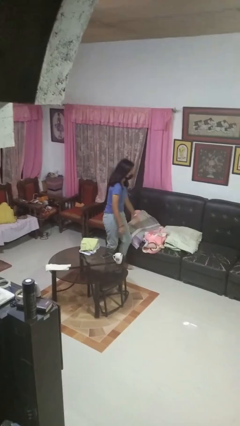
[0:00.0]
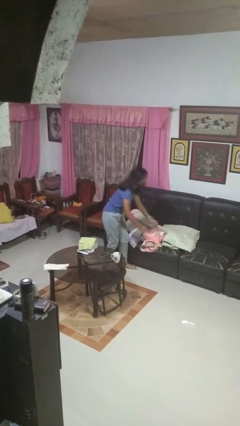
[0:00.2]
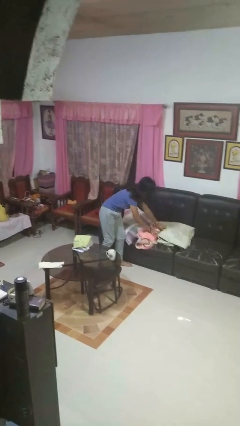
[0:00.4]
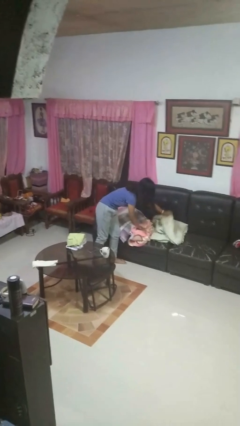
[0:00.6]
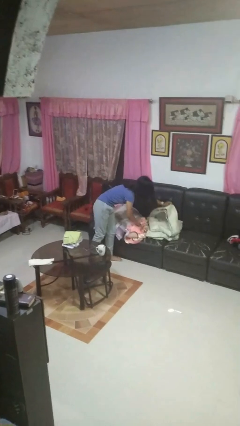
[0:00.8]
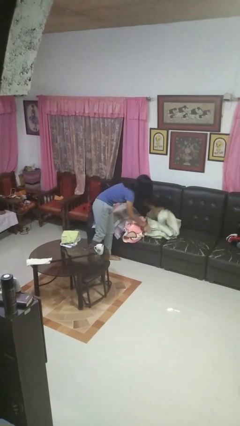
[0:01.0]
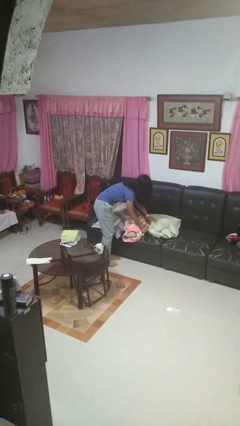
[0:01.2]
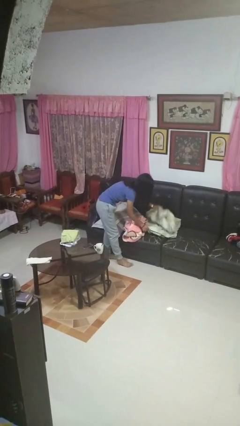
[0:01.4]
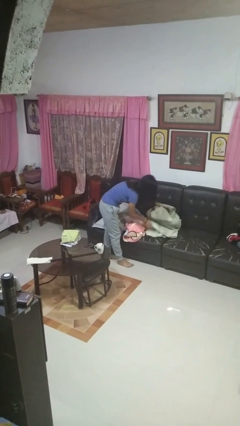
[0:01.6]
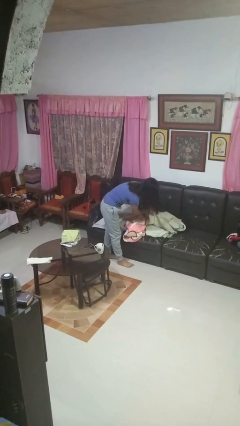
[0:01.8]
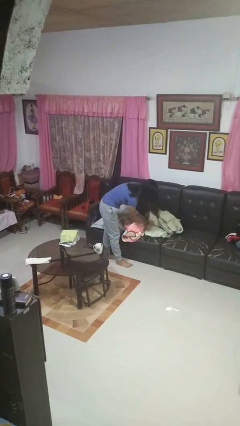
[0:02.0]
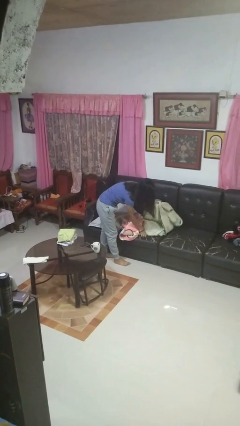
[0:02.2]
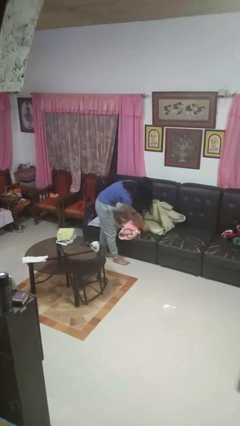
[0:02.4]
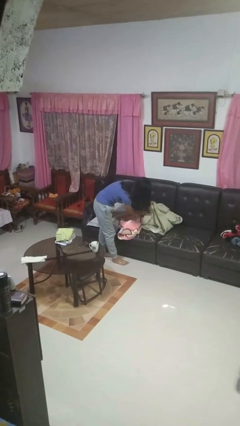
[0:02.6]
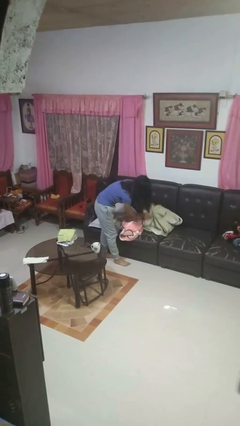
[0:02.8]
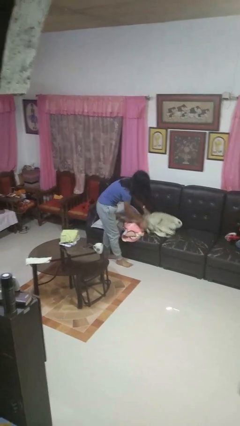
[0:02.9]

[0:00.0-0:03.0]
person searches in couch

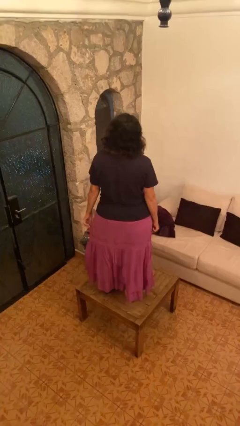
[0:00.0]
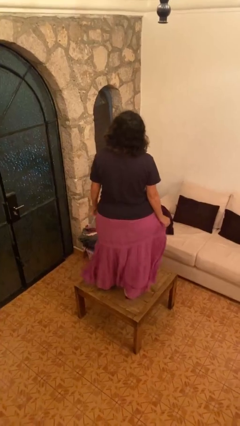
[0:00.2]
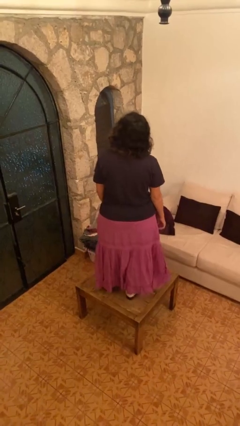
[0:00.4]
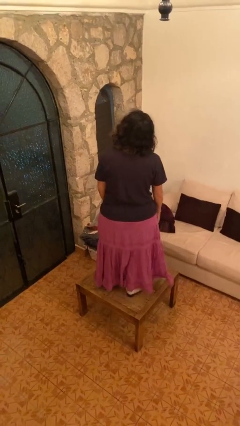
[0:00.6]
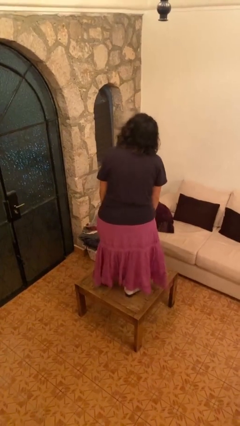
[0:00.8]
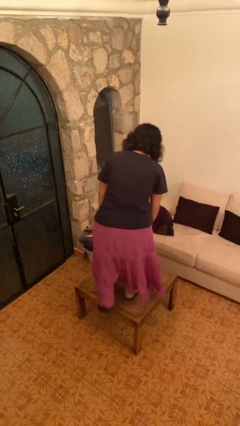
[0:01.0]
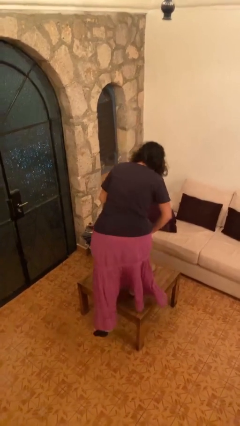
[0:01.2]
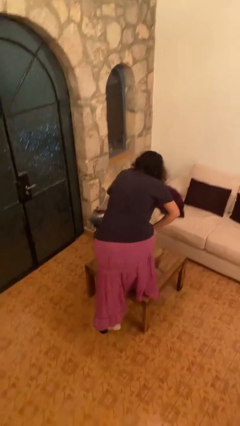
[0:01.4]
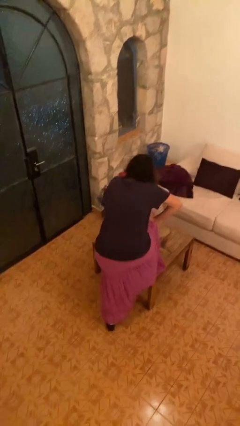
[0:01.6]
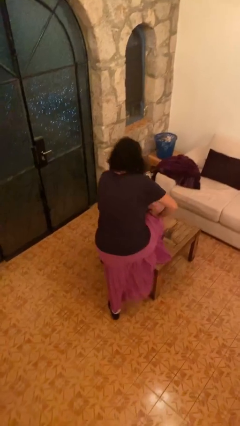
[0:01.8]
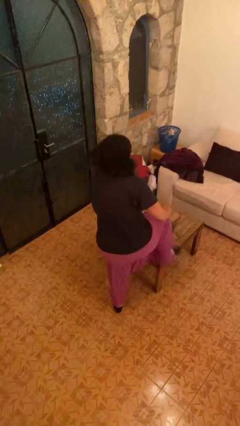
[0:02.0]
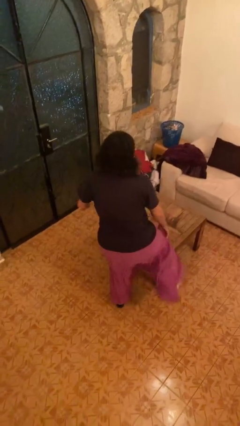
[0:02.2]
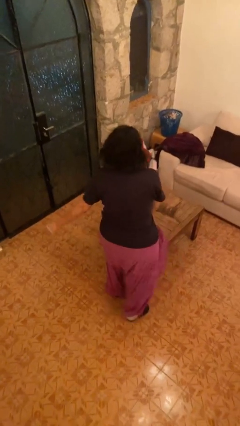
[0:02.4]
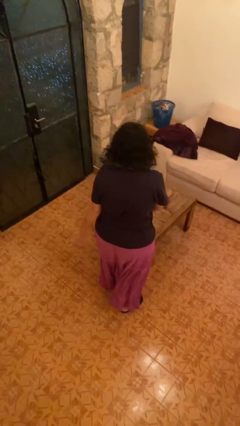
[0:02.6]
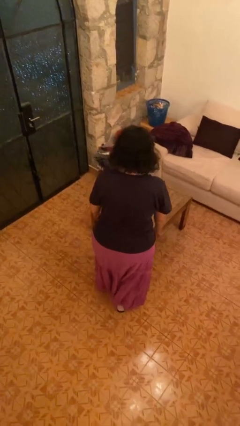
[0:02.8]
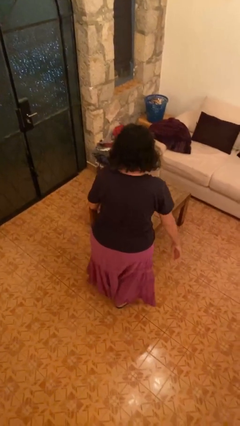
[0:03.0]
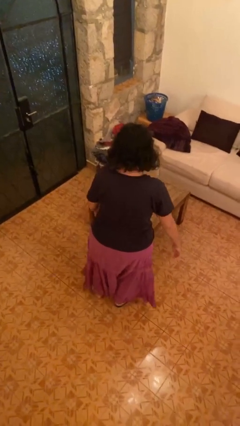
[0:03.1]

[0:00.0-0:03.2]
person climbs off table

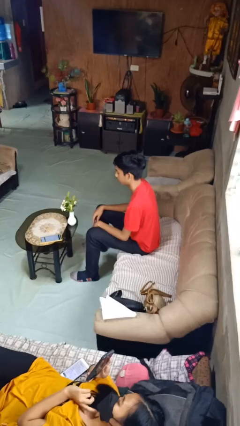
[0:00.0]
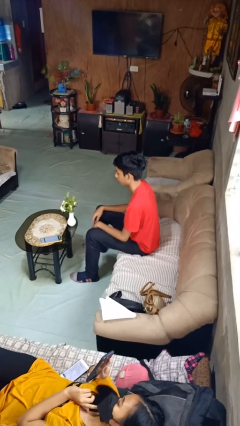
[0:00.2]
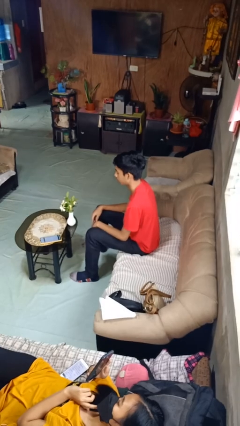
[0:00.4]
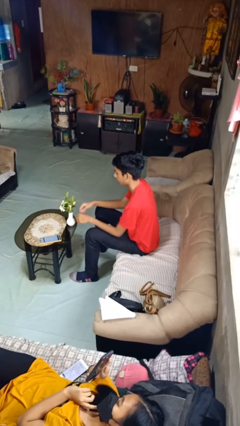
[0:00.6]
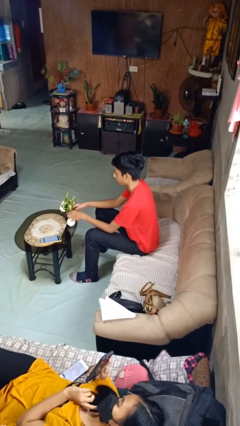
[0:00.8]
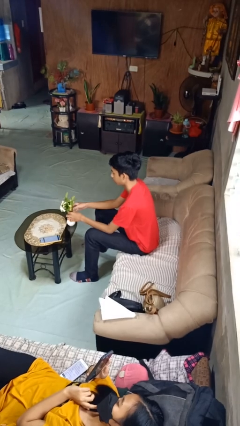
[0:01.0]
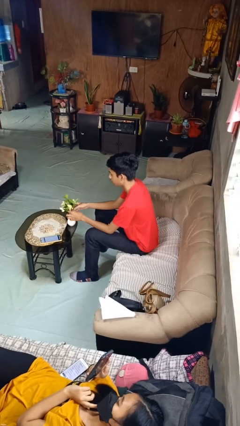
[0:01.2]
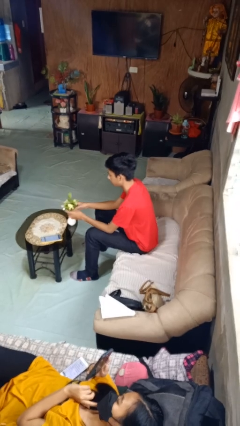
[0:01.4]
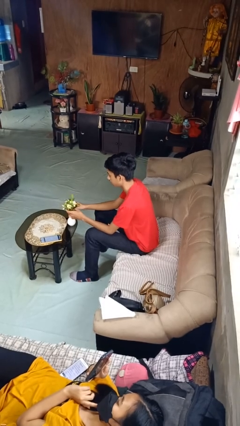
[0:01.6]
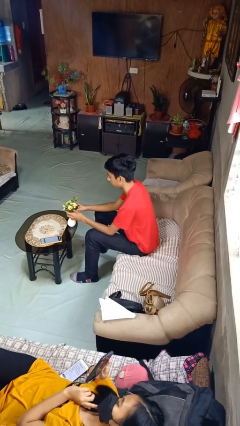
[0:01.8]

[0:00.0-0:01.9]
person arranges flowers in vase

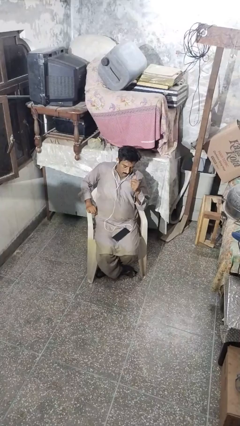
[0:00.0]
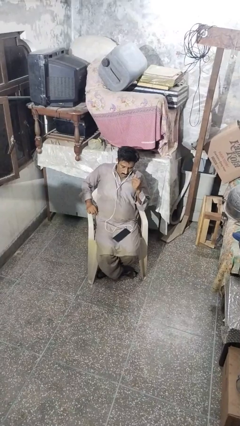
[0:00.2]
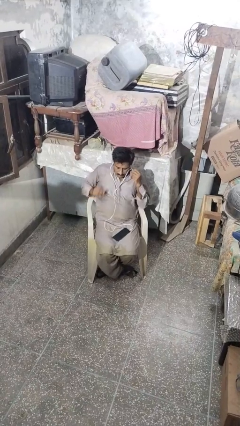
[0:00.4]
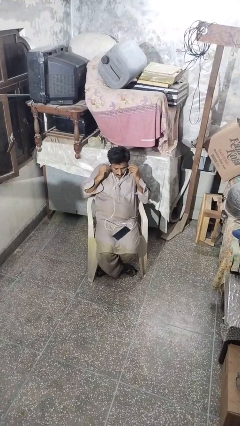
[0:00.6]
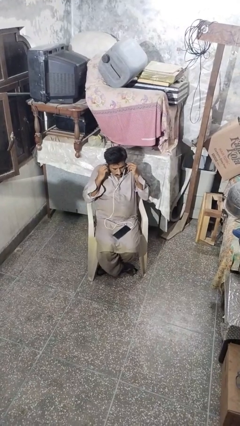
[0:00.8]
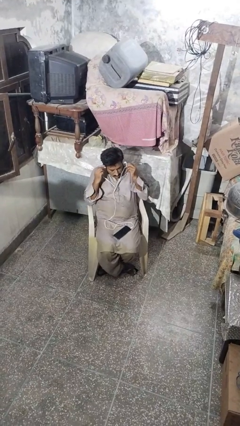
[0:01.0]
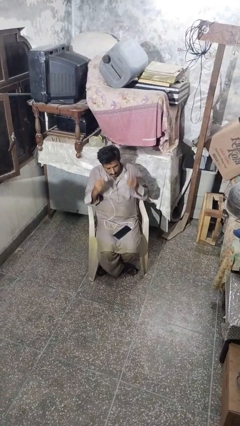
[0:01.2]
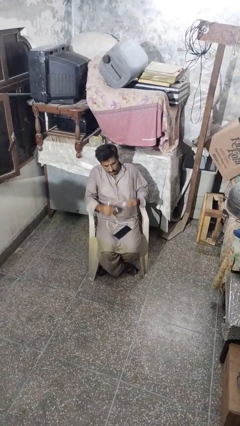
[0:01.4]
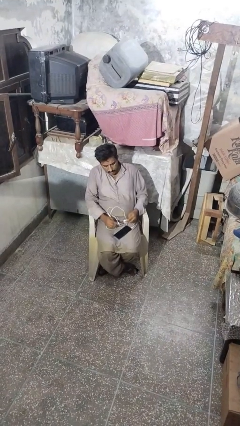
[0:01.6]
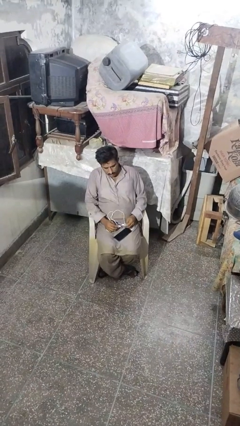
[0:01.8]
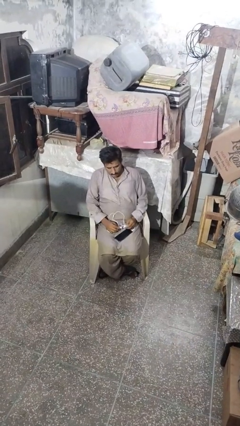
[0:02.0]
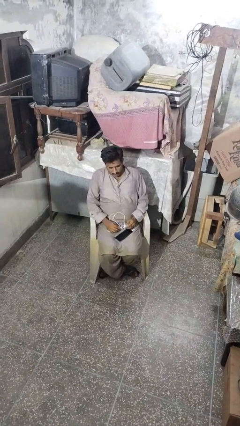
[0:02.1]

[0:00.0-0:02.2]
person takes off headphones

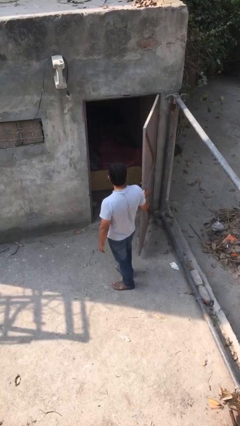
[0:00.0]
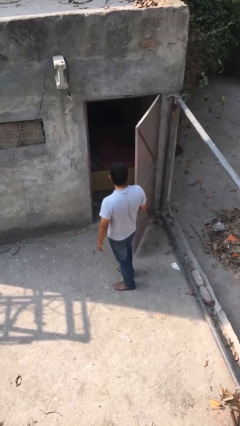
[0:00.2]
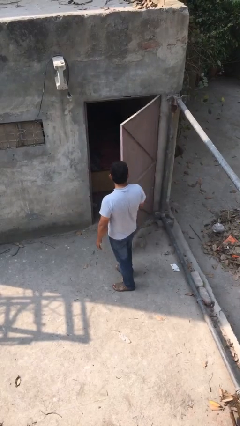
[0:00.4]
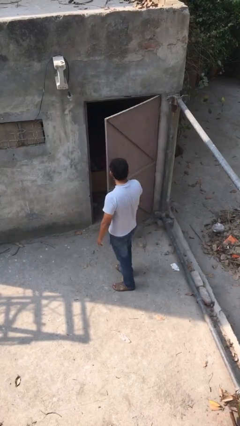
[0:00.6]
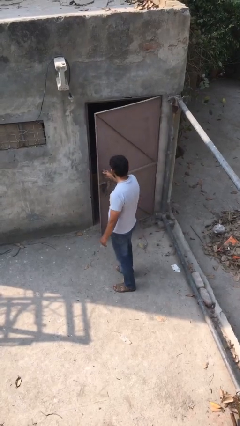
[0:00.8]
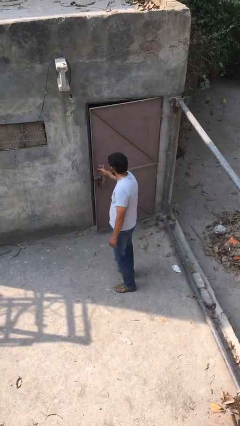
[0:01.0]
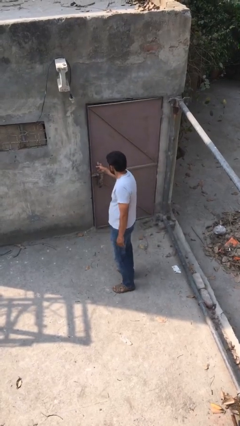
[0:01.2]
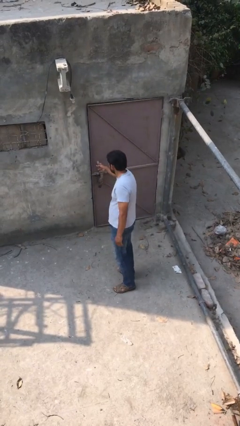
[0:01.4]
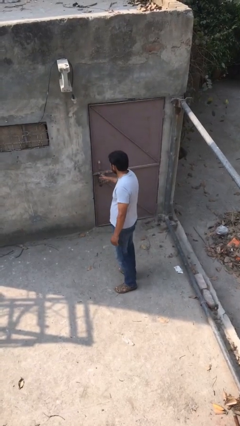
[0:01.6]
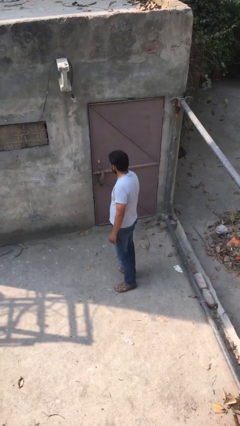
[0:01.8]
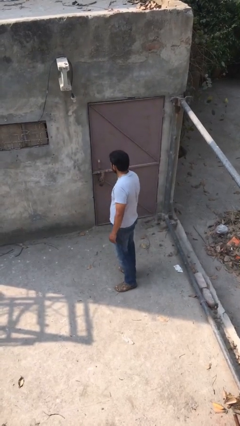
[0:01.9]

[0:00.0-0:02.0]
person closes facility door

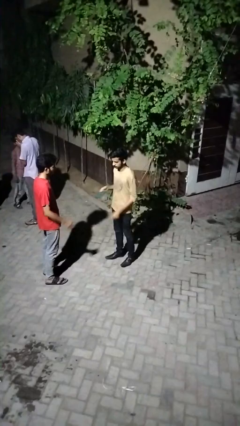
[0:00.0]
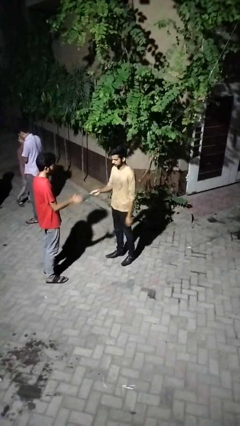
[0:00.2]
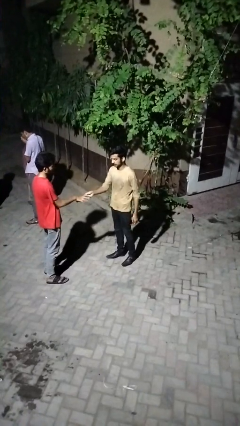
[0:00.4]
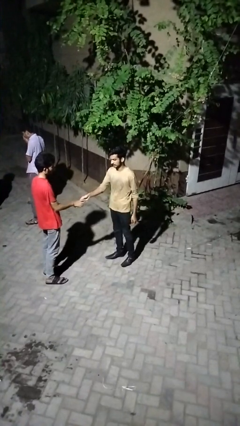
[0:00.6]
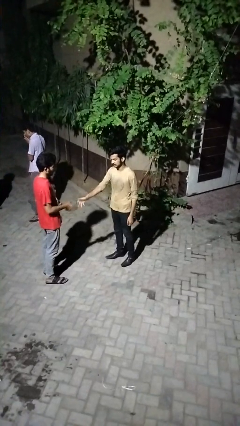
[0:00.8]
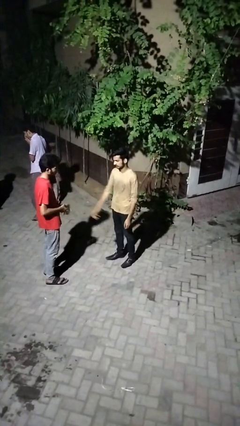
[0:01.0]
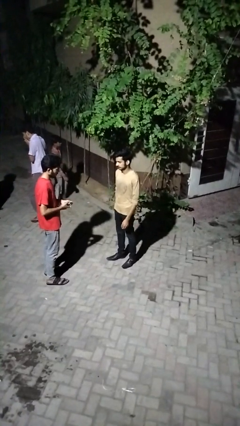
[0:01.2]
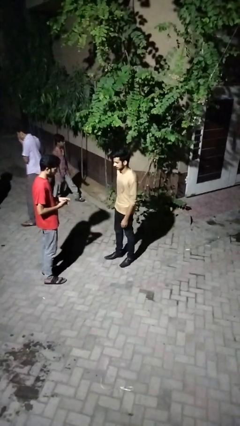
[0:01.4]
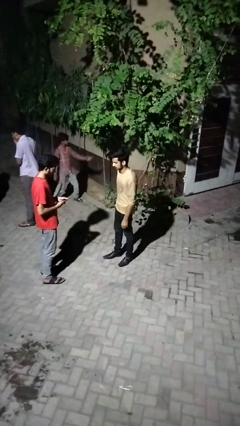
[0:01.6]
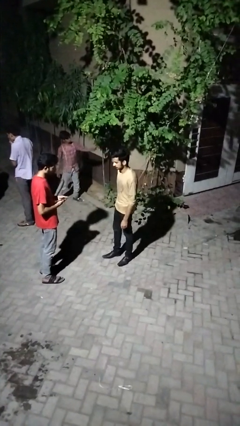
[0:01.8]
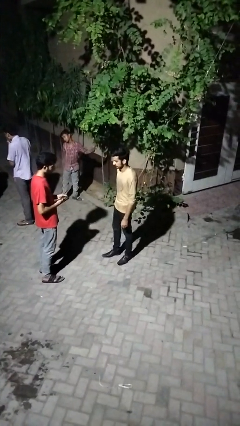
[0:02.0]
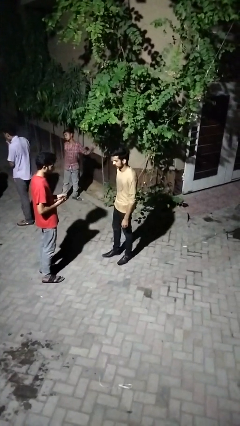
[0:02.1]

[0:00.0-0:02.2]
person transfers object to person

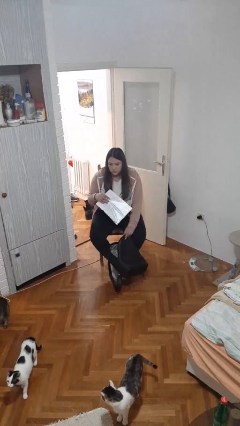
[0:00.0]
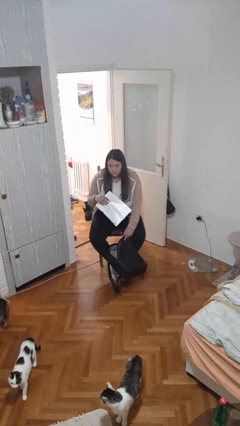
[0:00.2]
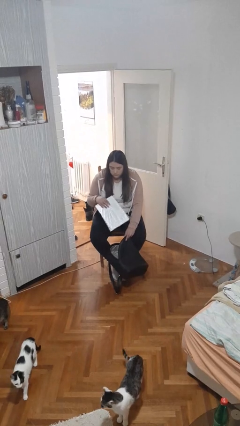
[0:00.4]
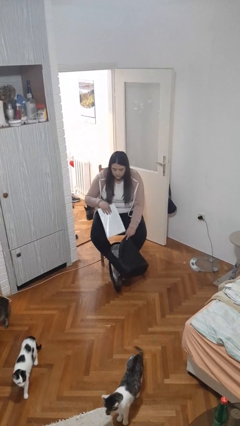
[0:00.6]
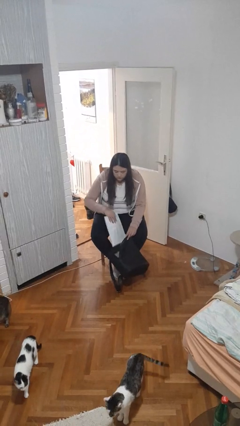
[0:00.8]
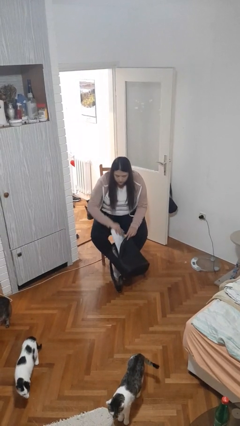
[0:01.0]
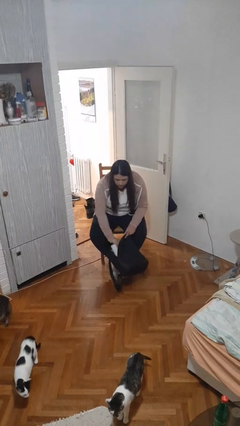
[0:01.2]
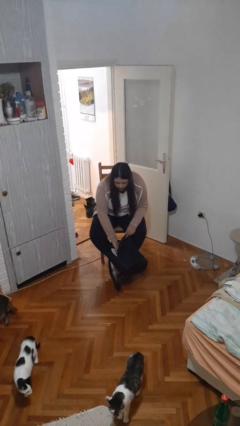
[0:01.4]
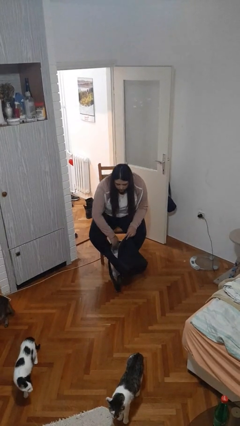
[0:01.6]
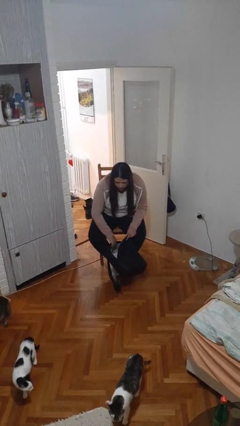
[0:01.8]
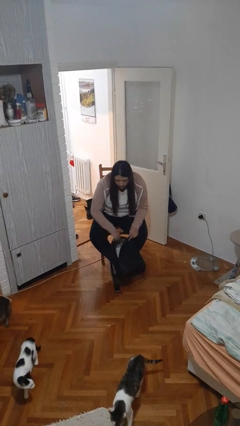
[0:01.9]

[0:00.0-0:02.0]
person puts object into backpack

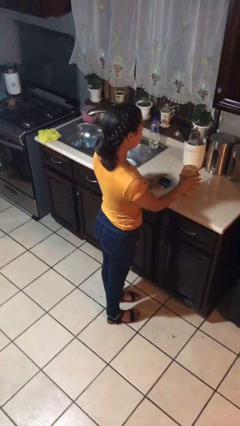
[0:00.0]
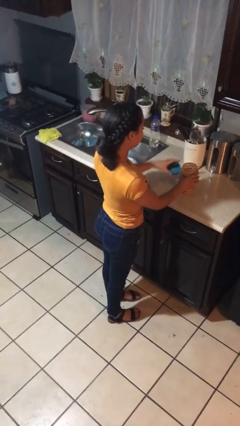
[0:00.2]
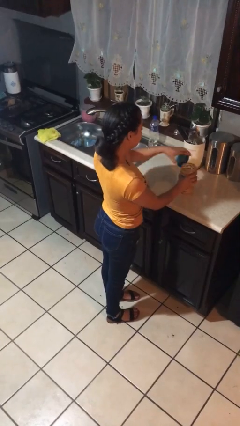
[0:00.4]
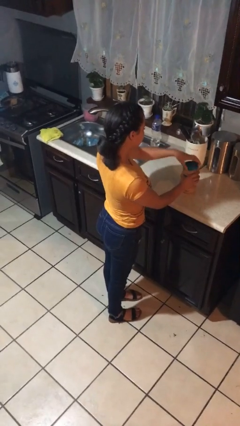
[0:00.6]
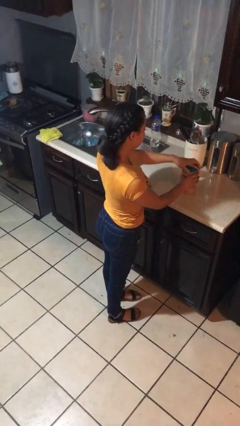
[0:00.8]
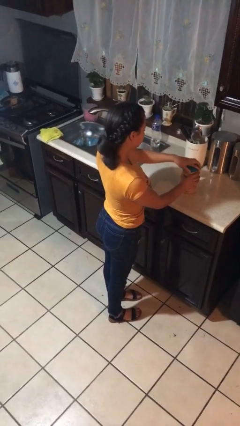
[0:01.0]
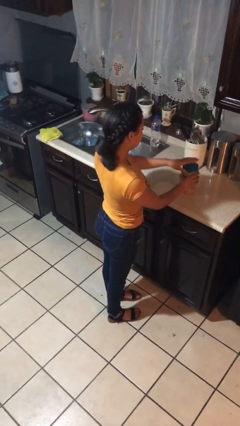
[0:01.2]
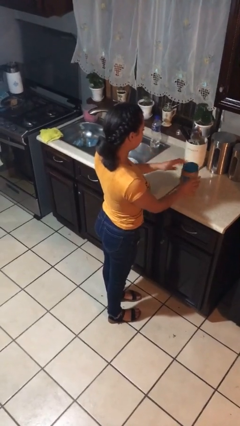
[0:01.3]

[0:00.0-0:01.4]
person closes jar
